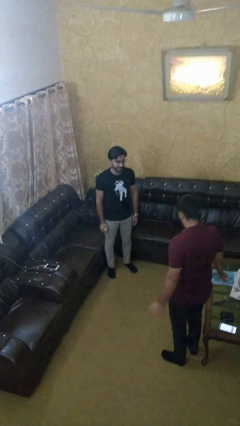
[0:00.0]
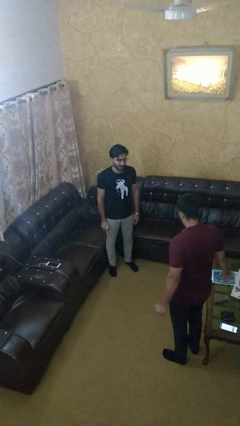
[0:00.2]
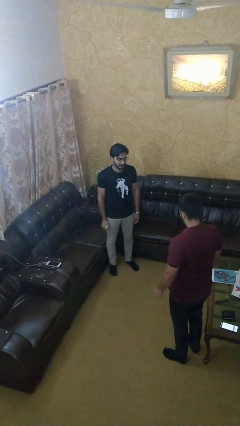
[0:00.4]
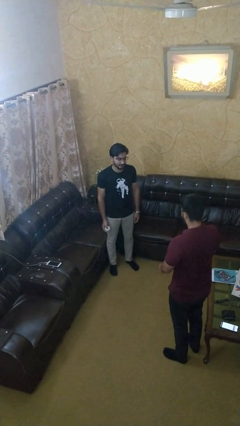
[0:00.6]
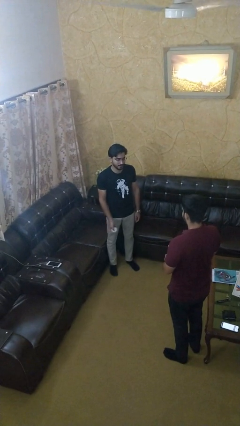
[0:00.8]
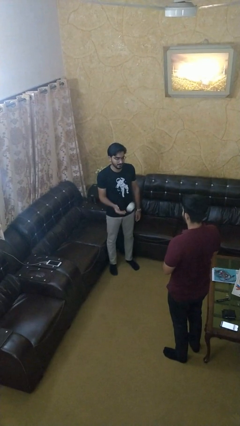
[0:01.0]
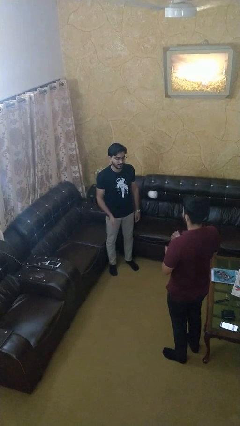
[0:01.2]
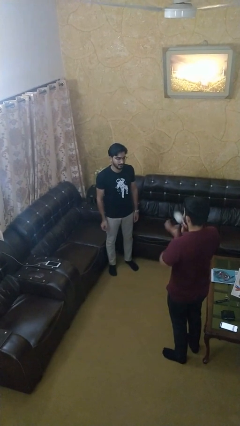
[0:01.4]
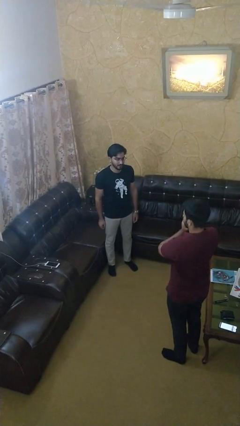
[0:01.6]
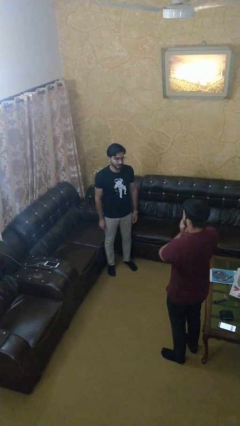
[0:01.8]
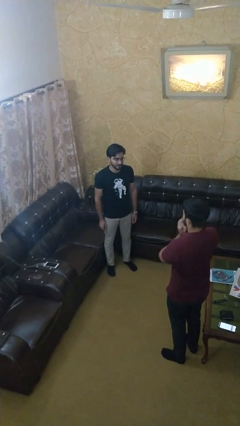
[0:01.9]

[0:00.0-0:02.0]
person throws object to person

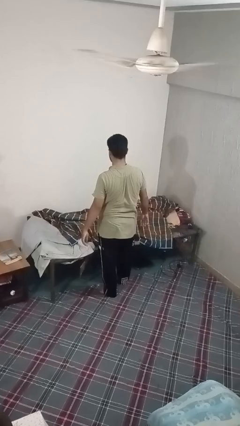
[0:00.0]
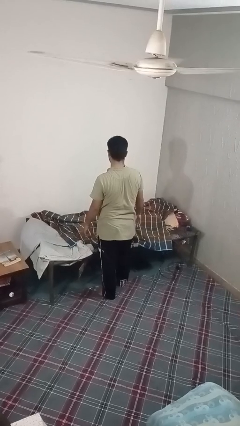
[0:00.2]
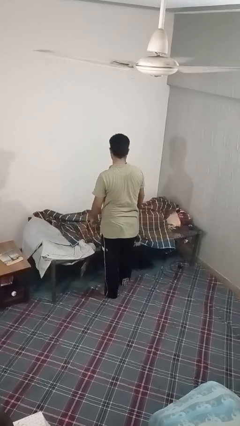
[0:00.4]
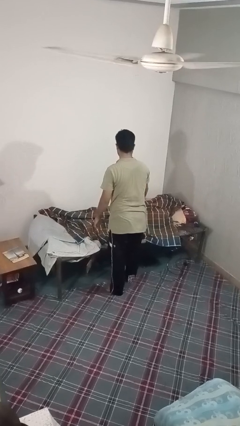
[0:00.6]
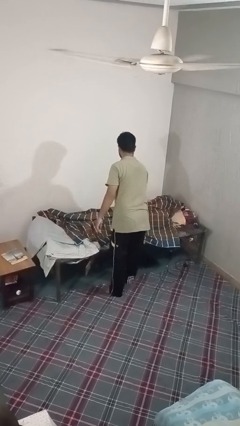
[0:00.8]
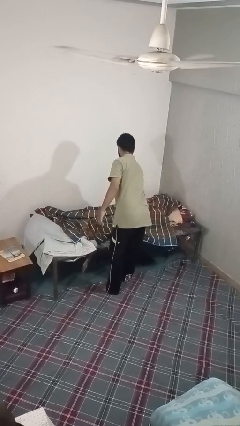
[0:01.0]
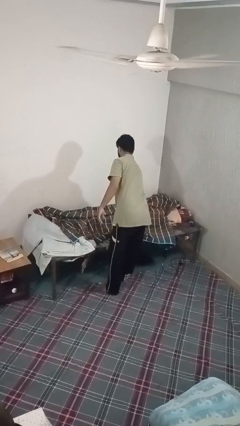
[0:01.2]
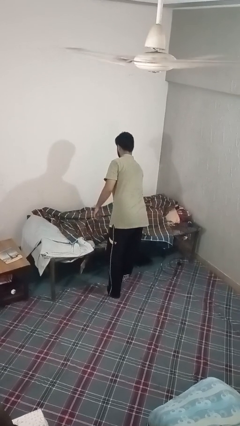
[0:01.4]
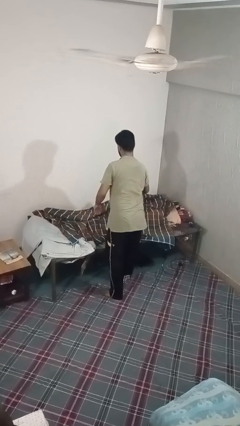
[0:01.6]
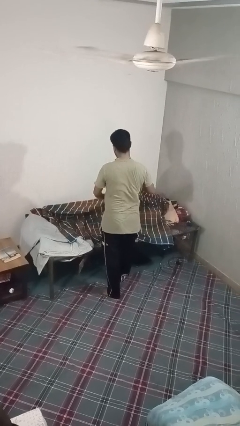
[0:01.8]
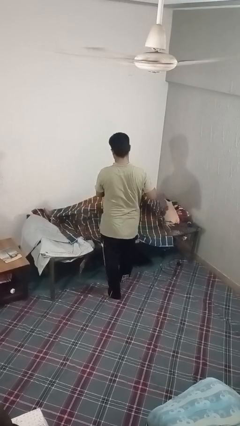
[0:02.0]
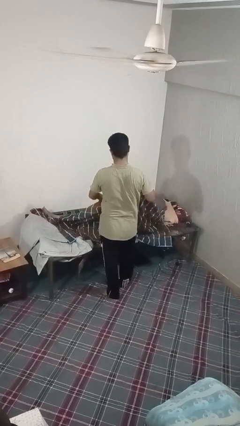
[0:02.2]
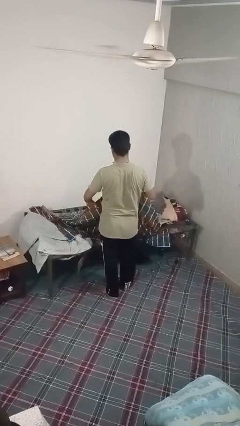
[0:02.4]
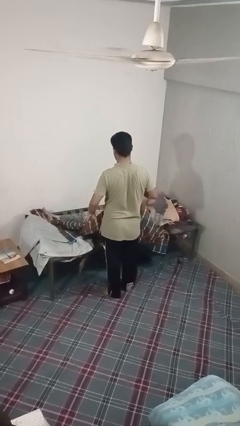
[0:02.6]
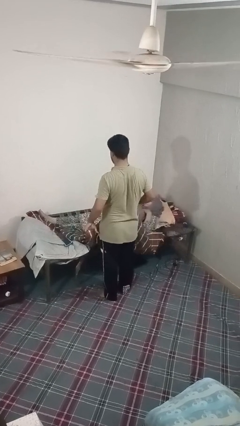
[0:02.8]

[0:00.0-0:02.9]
person uncovers friend with blanket

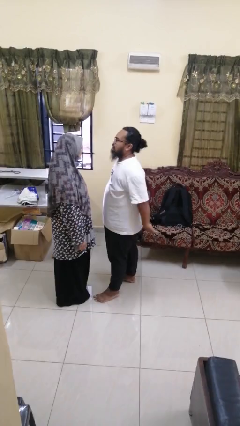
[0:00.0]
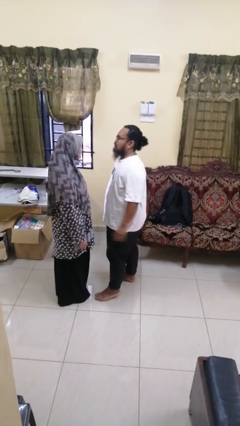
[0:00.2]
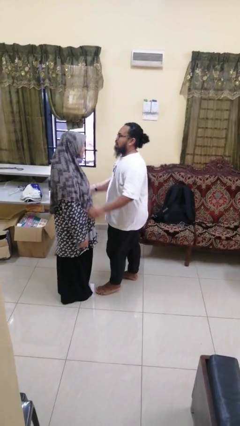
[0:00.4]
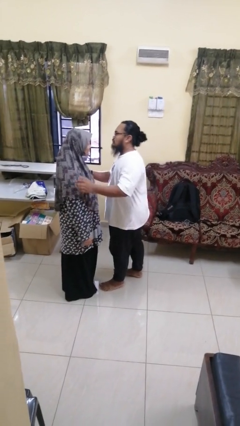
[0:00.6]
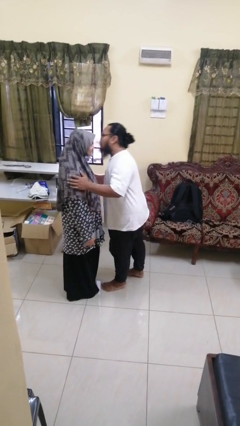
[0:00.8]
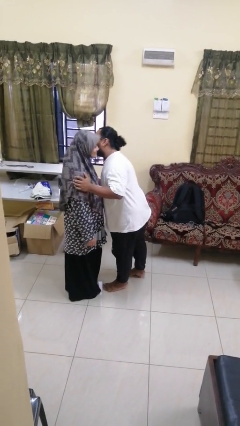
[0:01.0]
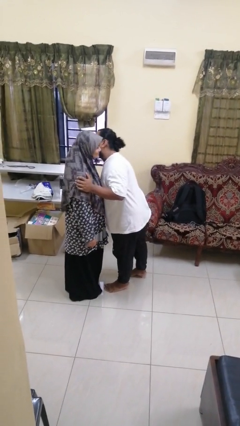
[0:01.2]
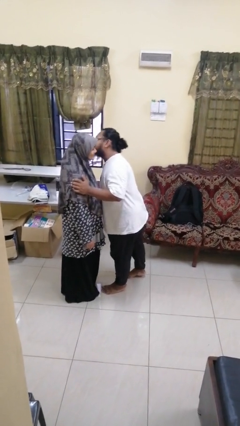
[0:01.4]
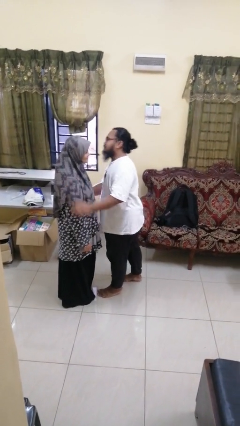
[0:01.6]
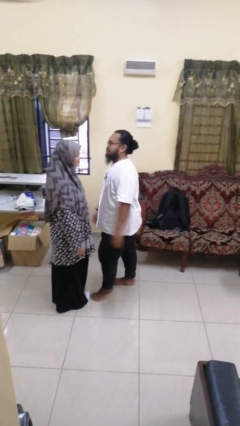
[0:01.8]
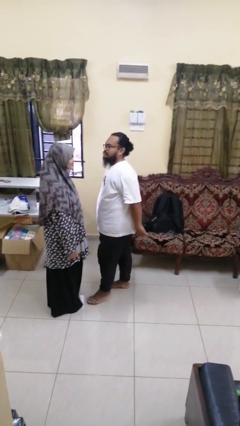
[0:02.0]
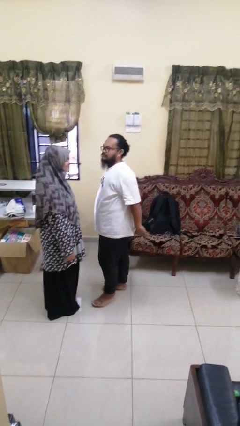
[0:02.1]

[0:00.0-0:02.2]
person kisses cheek of person

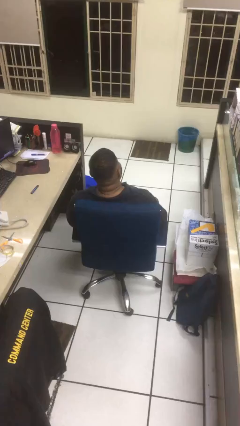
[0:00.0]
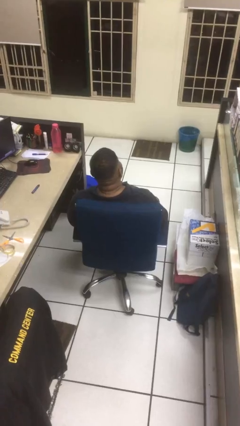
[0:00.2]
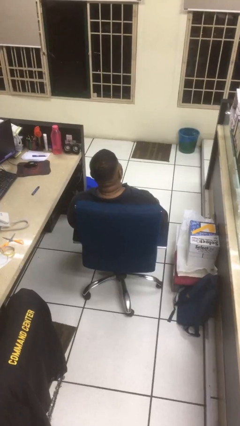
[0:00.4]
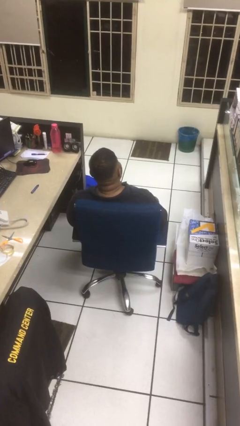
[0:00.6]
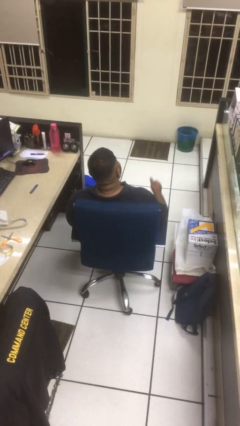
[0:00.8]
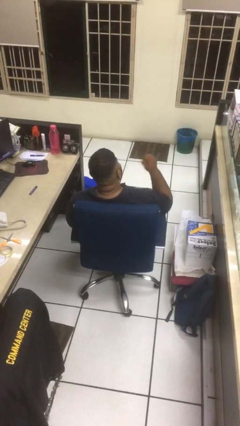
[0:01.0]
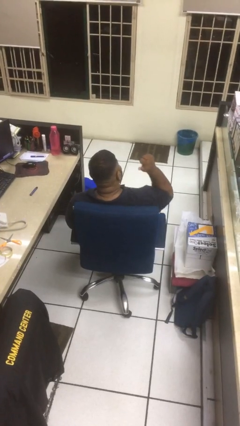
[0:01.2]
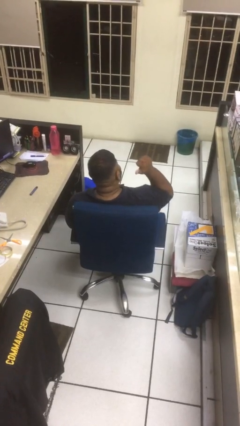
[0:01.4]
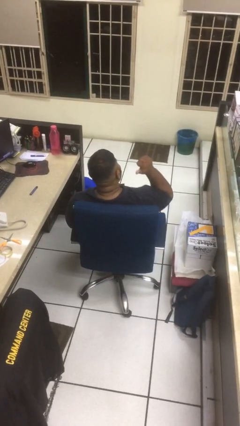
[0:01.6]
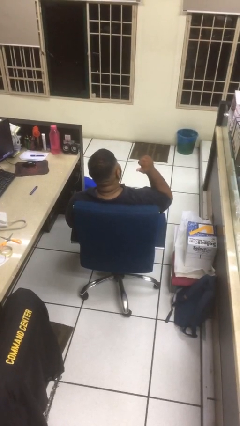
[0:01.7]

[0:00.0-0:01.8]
person gestures behind me

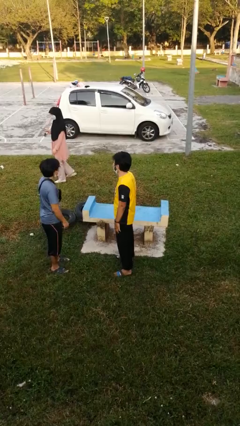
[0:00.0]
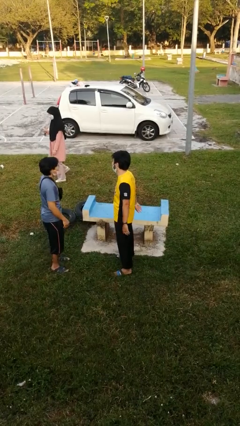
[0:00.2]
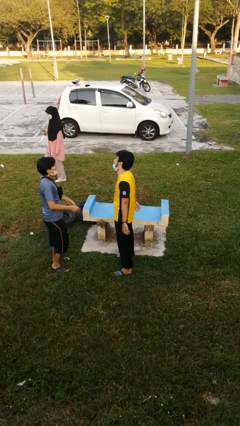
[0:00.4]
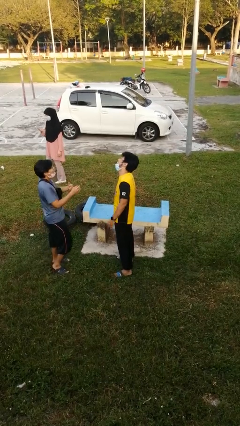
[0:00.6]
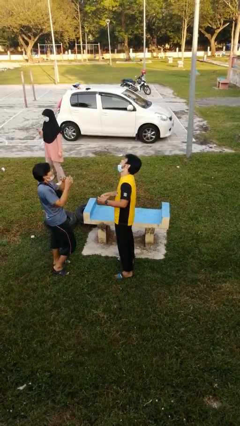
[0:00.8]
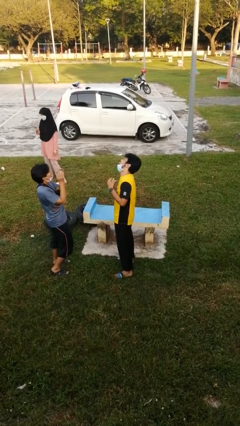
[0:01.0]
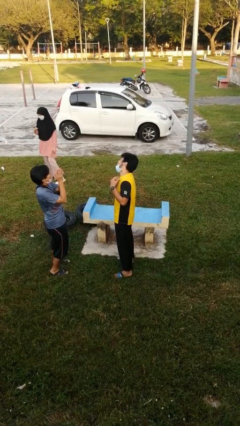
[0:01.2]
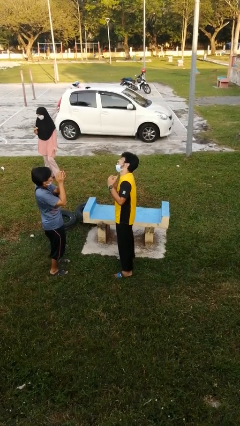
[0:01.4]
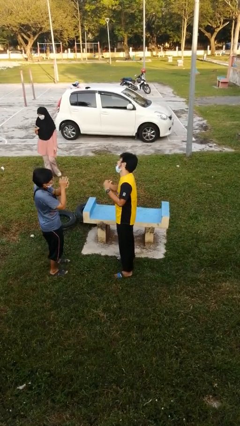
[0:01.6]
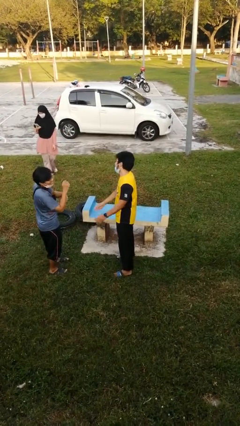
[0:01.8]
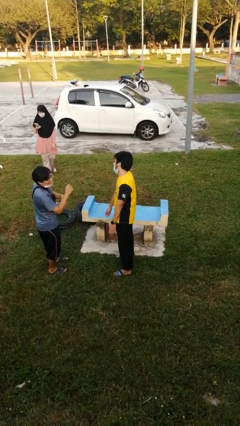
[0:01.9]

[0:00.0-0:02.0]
person laughs with person

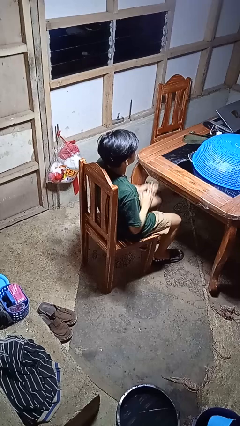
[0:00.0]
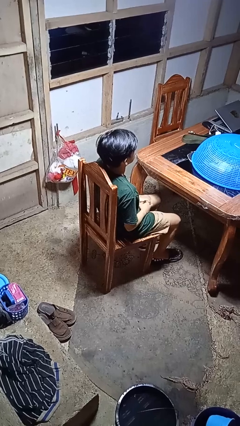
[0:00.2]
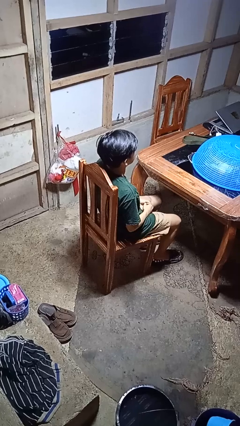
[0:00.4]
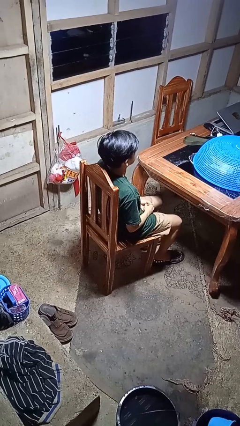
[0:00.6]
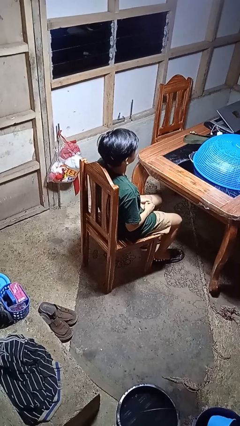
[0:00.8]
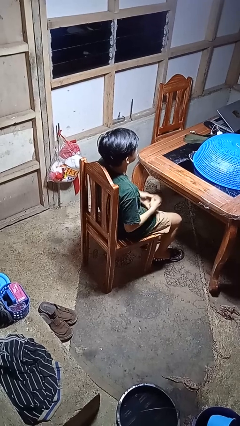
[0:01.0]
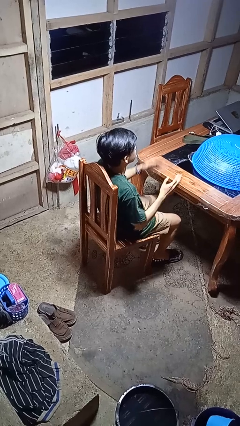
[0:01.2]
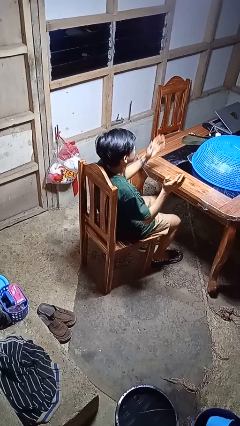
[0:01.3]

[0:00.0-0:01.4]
person claps hands

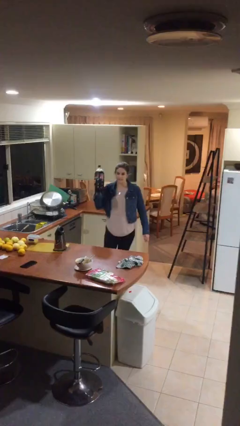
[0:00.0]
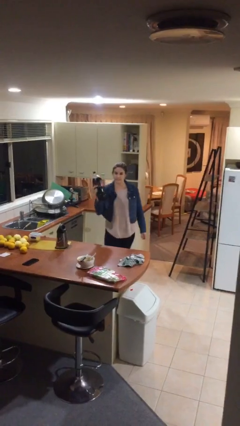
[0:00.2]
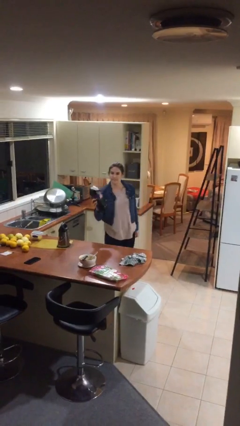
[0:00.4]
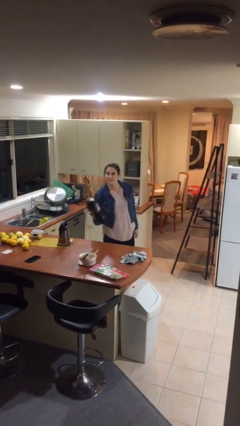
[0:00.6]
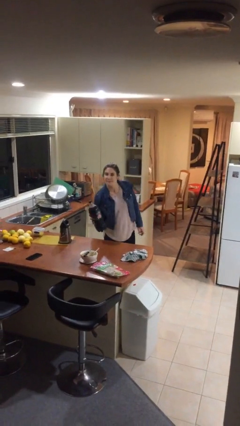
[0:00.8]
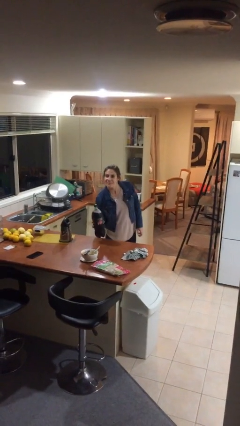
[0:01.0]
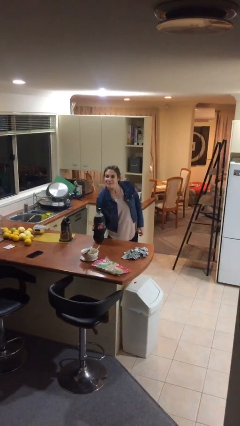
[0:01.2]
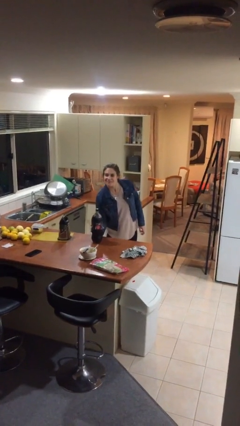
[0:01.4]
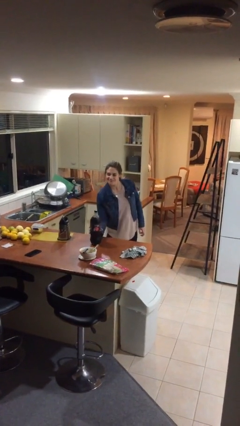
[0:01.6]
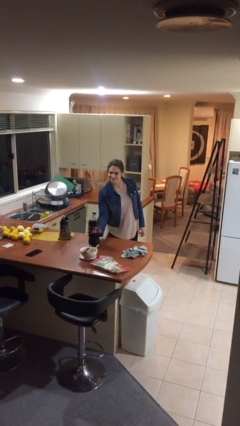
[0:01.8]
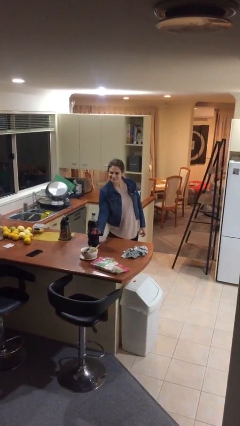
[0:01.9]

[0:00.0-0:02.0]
person puts down object on table

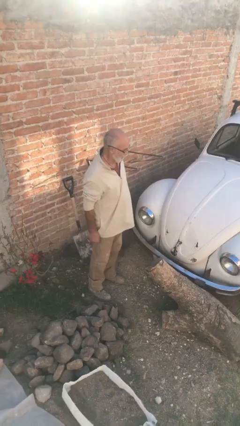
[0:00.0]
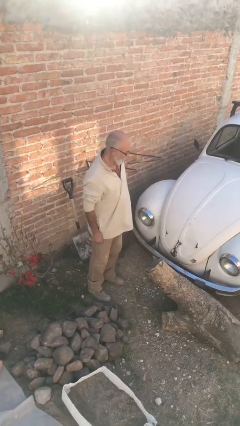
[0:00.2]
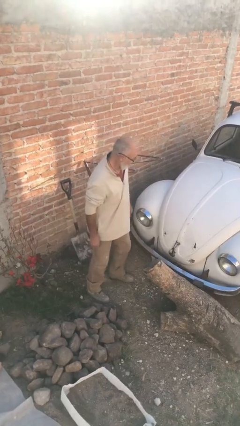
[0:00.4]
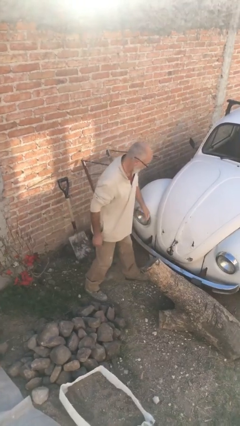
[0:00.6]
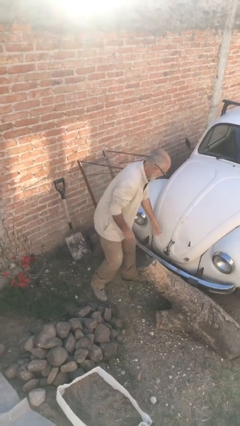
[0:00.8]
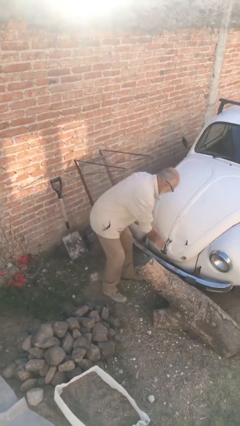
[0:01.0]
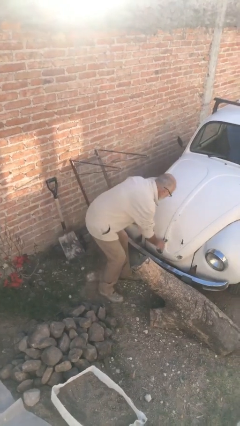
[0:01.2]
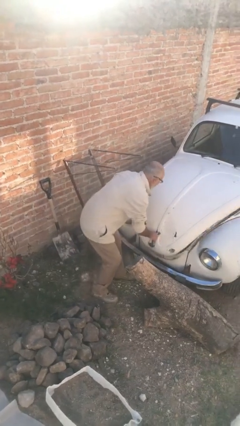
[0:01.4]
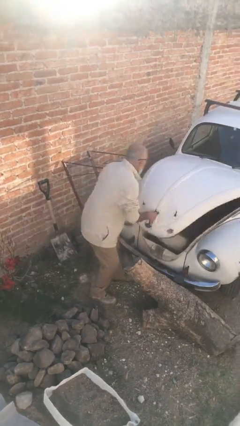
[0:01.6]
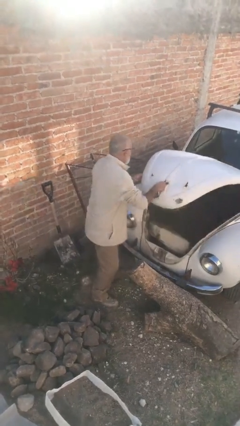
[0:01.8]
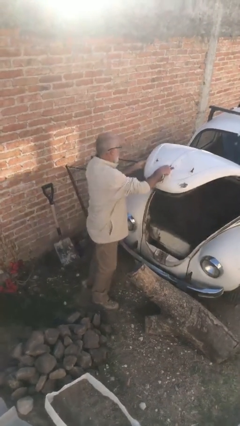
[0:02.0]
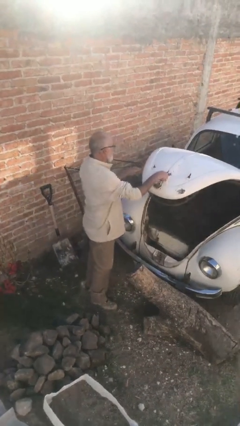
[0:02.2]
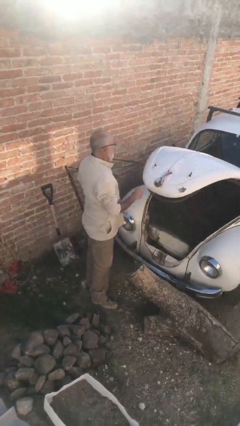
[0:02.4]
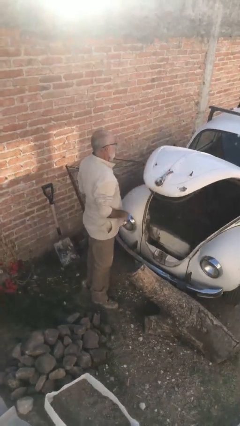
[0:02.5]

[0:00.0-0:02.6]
person opens car trunk
